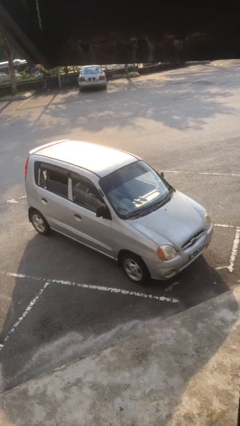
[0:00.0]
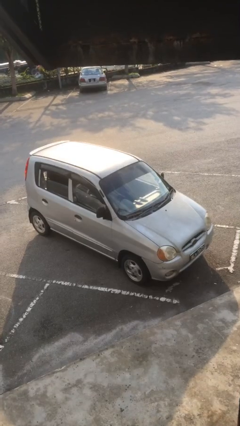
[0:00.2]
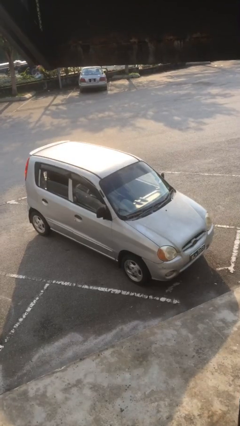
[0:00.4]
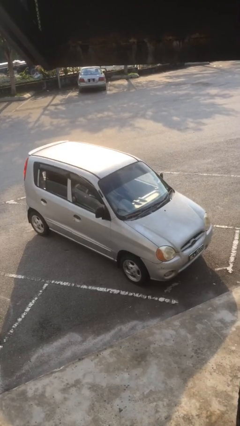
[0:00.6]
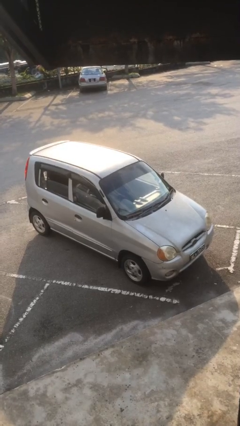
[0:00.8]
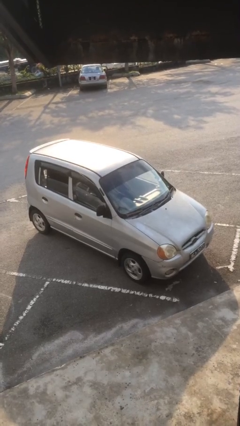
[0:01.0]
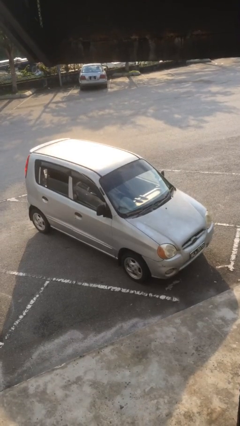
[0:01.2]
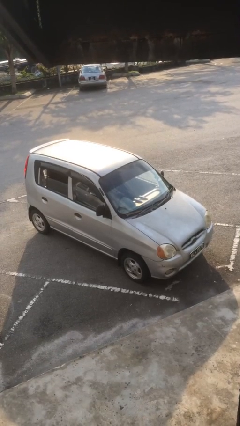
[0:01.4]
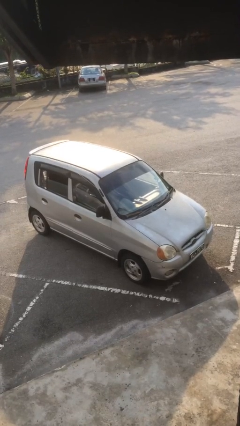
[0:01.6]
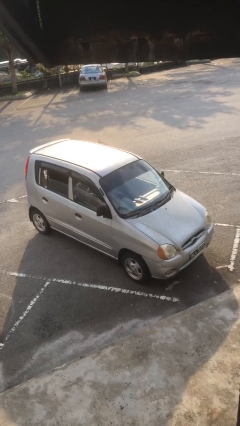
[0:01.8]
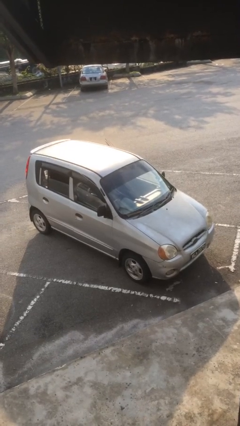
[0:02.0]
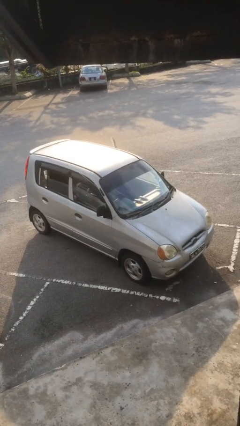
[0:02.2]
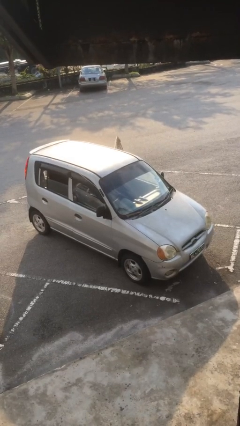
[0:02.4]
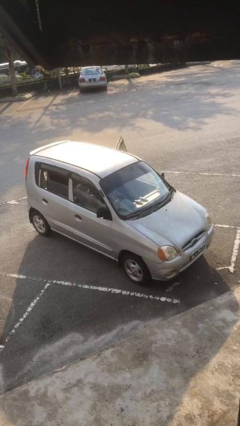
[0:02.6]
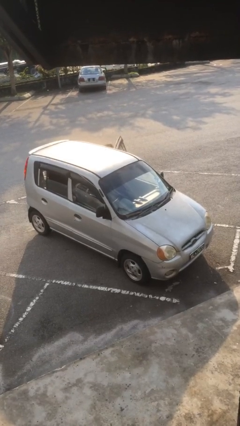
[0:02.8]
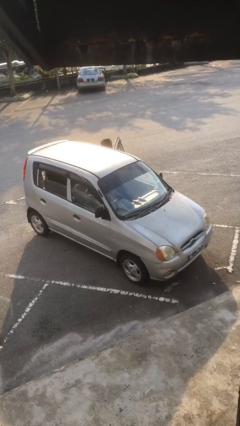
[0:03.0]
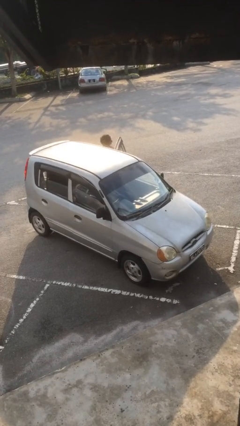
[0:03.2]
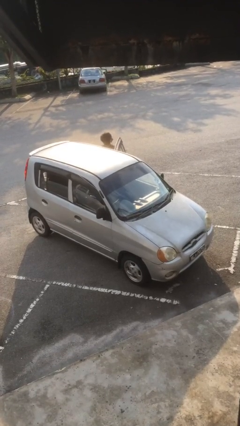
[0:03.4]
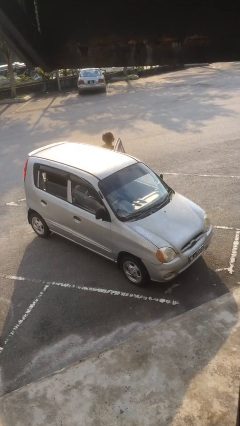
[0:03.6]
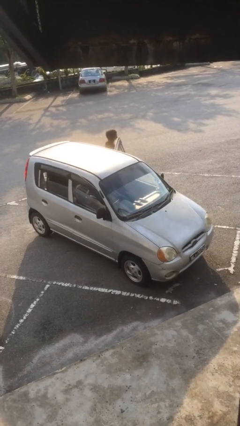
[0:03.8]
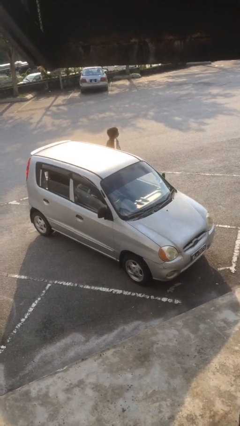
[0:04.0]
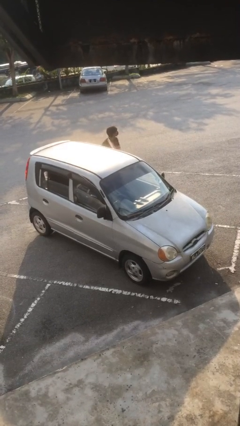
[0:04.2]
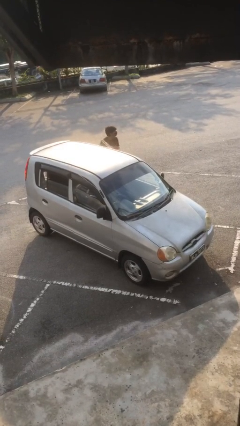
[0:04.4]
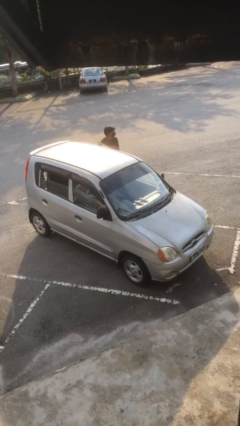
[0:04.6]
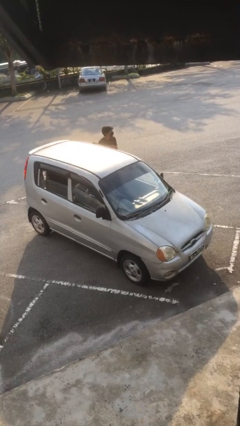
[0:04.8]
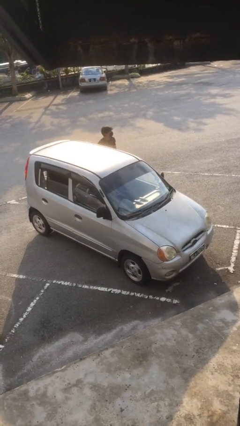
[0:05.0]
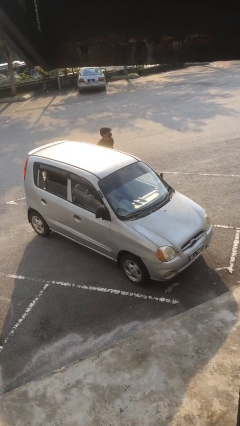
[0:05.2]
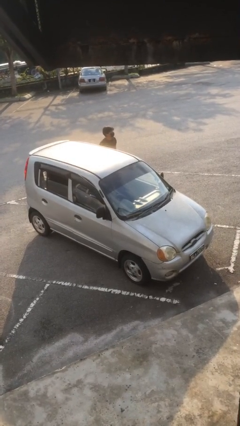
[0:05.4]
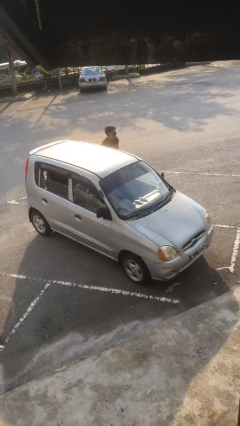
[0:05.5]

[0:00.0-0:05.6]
car drops off person

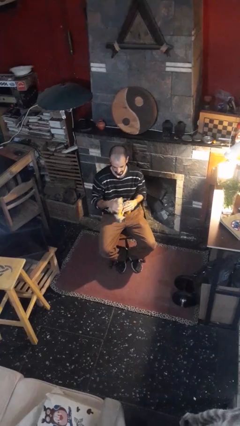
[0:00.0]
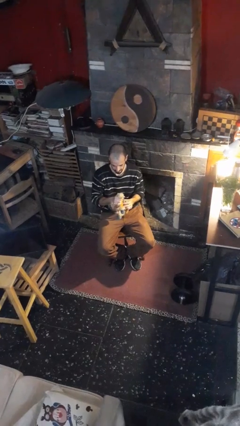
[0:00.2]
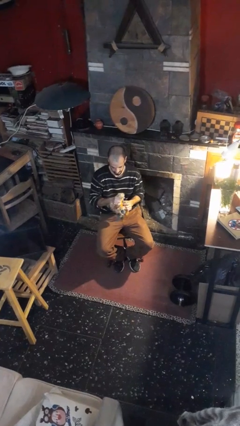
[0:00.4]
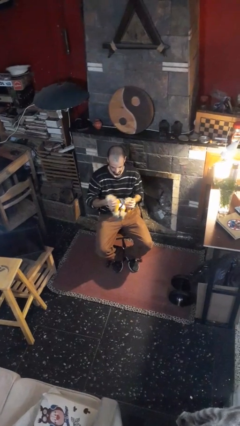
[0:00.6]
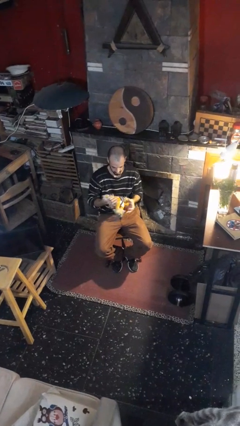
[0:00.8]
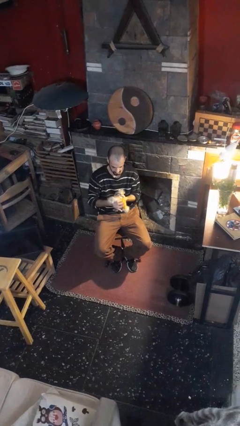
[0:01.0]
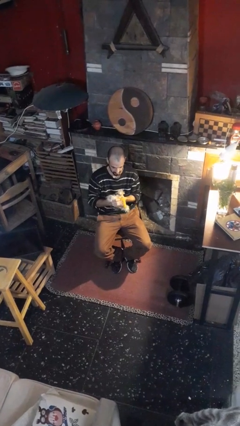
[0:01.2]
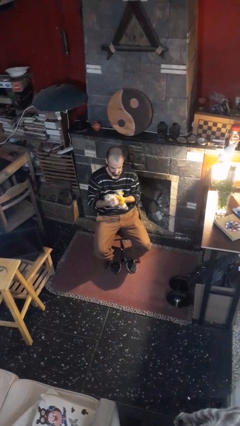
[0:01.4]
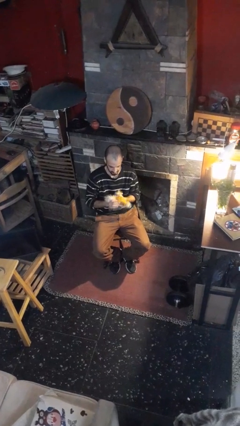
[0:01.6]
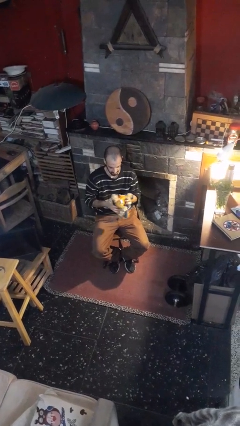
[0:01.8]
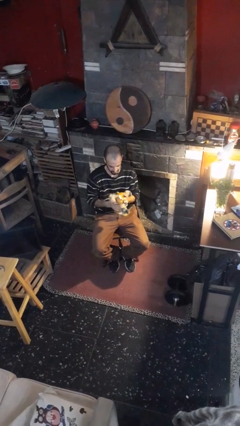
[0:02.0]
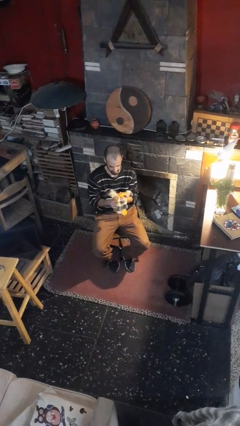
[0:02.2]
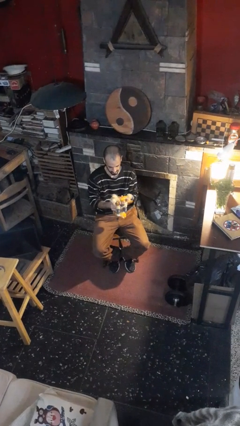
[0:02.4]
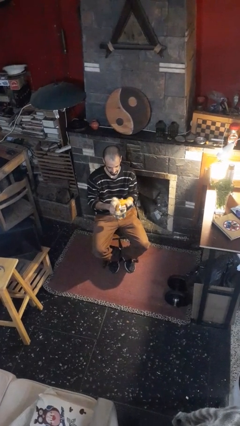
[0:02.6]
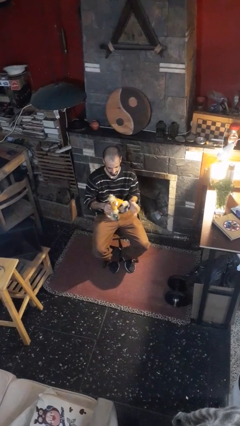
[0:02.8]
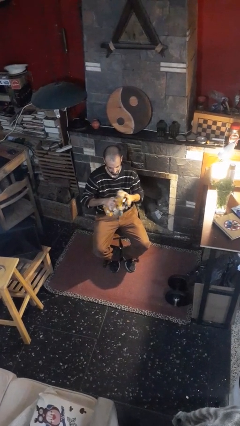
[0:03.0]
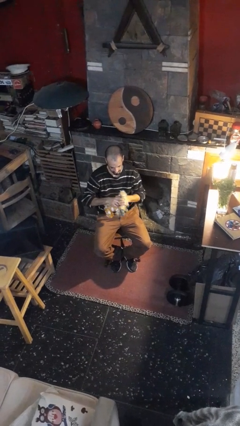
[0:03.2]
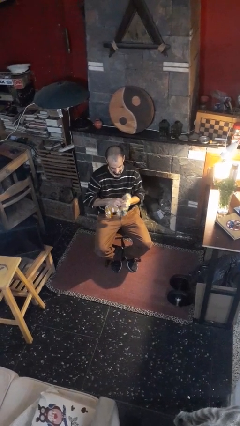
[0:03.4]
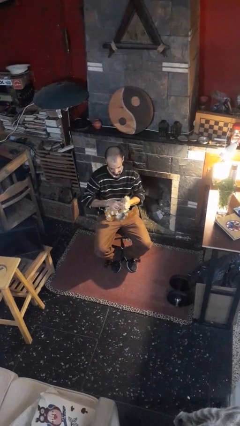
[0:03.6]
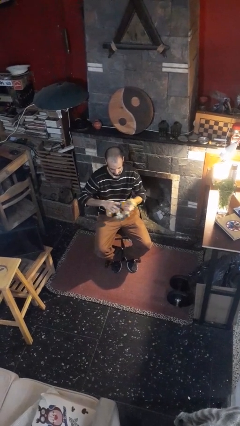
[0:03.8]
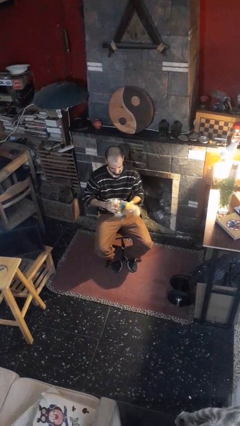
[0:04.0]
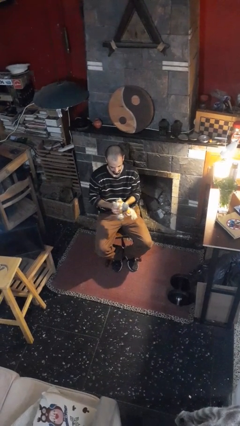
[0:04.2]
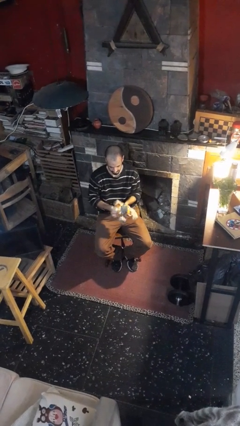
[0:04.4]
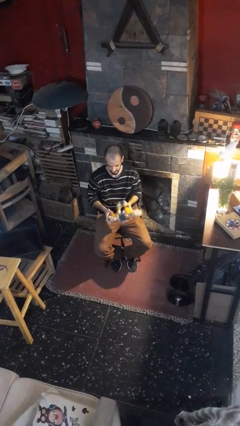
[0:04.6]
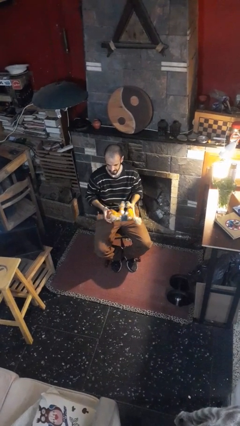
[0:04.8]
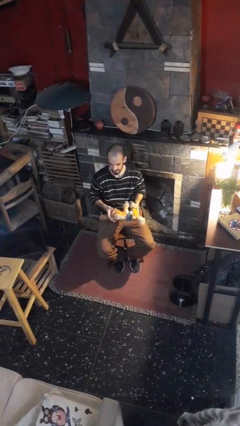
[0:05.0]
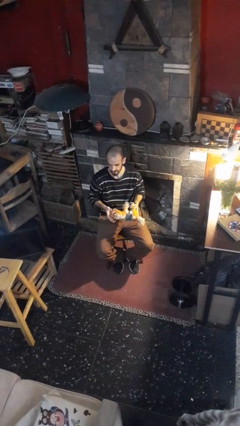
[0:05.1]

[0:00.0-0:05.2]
person squeezes object

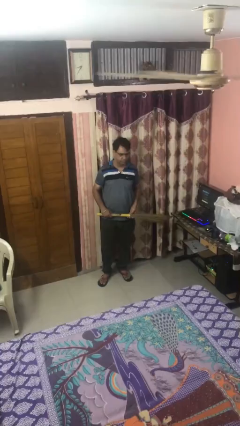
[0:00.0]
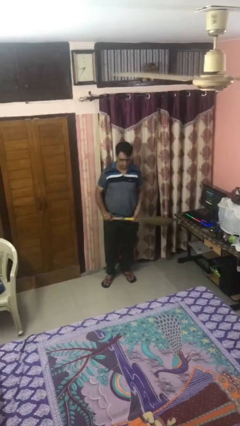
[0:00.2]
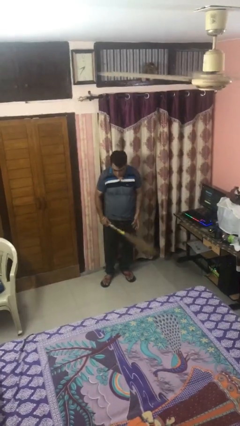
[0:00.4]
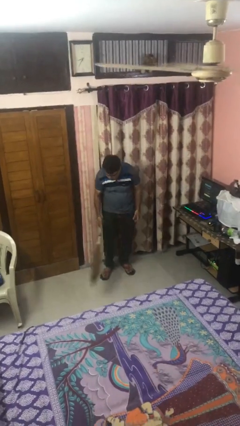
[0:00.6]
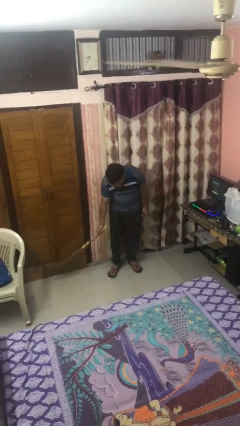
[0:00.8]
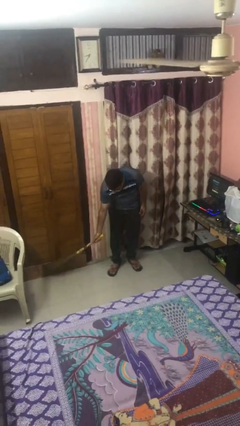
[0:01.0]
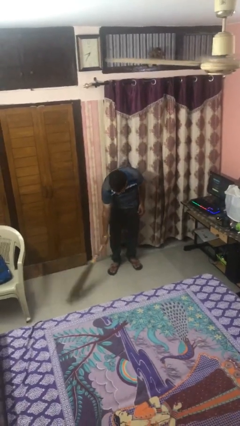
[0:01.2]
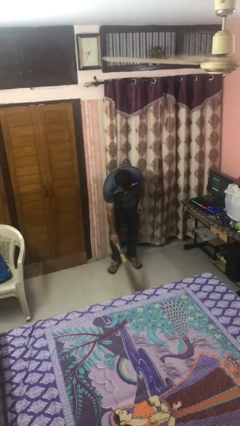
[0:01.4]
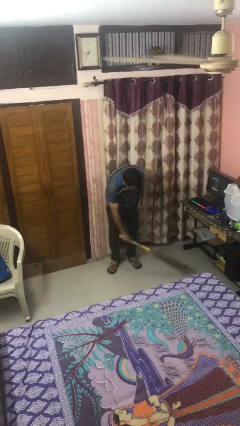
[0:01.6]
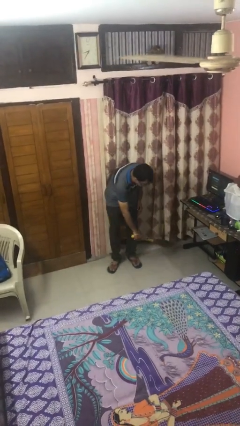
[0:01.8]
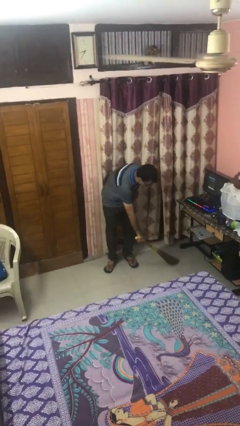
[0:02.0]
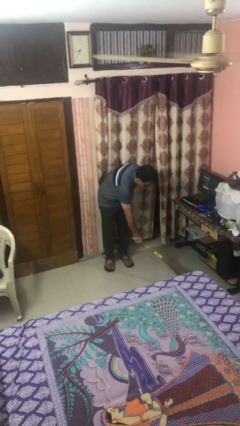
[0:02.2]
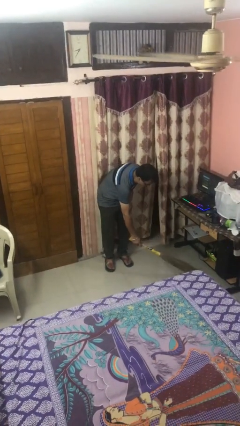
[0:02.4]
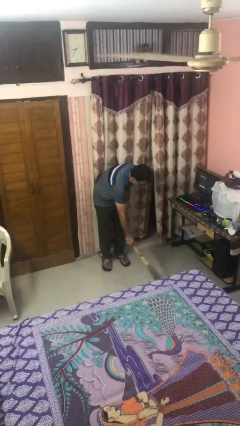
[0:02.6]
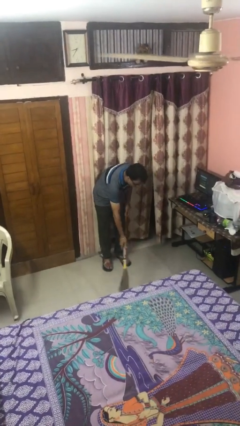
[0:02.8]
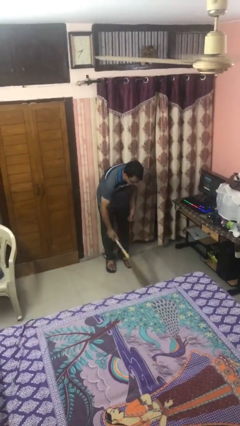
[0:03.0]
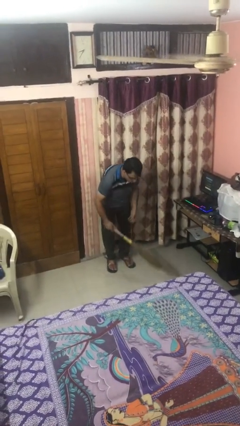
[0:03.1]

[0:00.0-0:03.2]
person sweeps floor

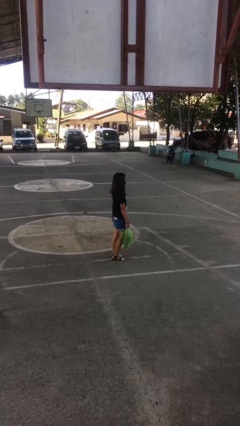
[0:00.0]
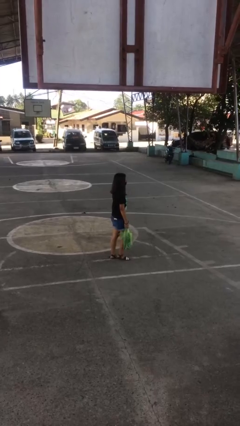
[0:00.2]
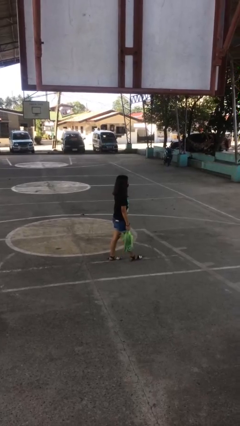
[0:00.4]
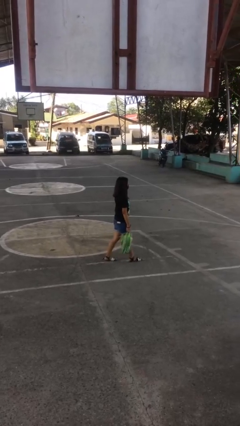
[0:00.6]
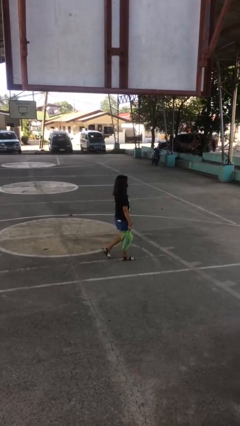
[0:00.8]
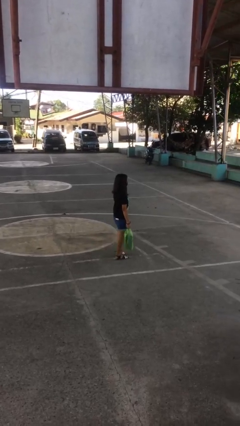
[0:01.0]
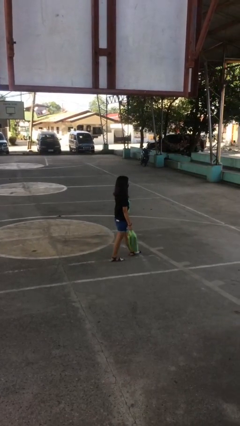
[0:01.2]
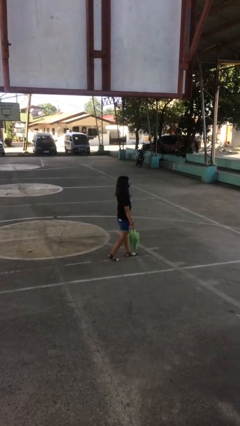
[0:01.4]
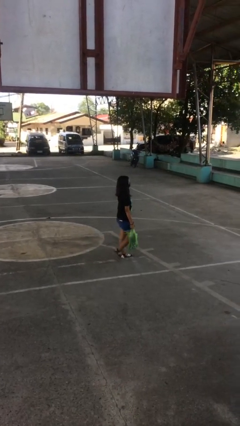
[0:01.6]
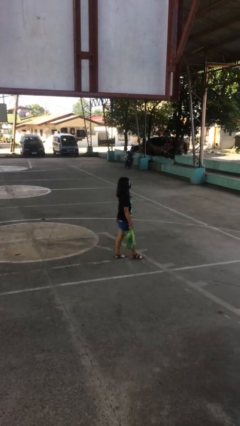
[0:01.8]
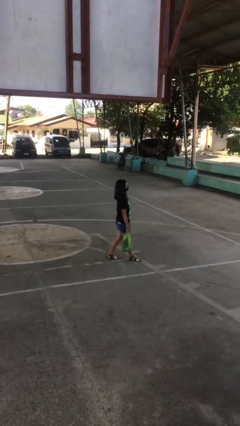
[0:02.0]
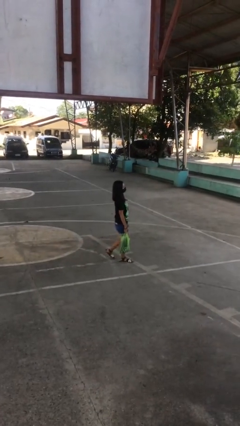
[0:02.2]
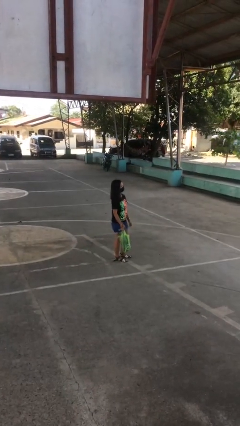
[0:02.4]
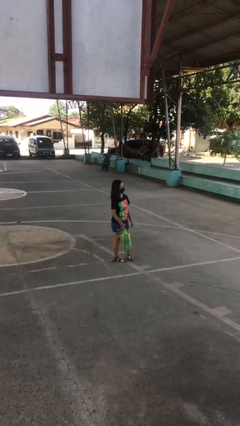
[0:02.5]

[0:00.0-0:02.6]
person carries groceries

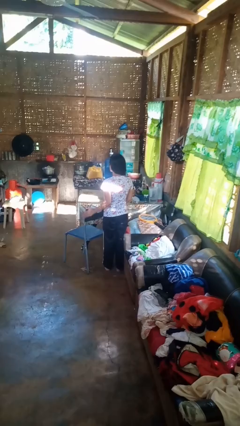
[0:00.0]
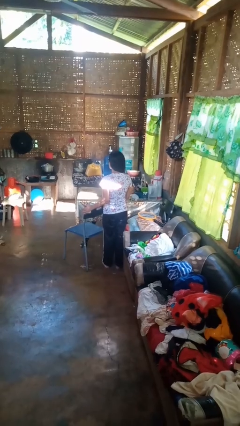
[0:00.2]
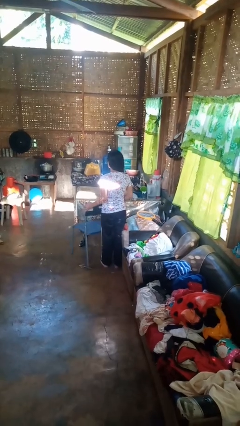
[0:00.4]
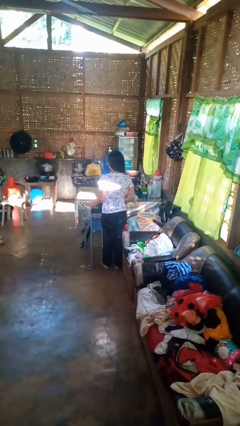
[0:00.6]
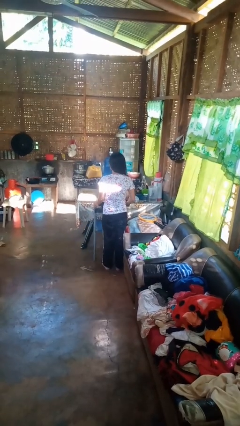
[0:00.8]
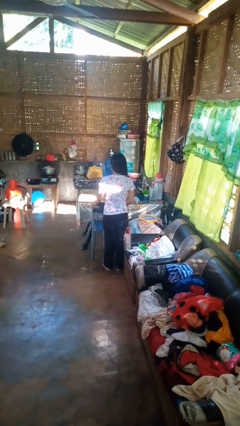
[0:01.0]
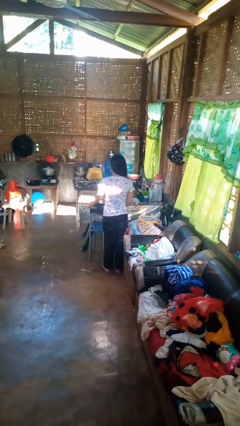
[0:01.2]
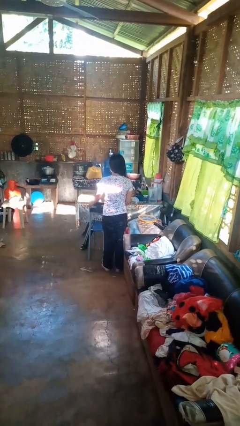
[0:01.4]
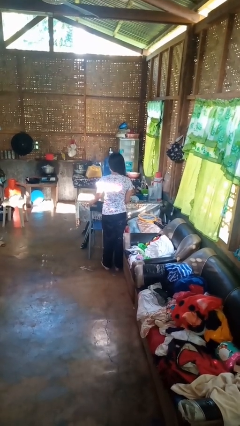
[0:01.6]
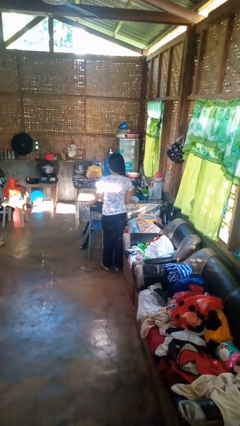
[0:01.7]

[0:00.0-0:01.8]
person pushes in chair
